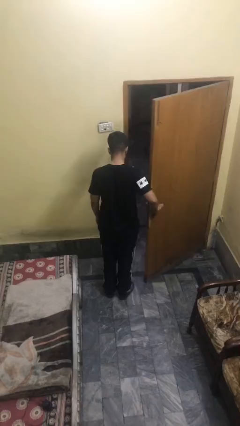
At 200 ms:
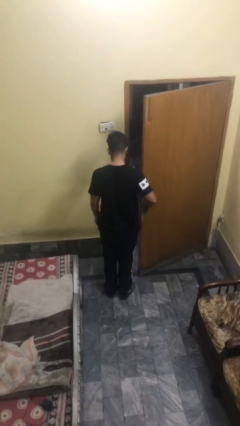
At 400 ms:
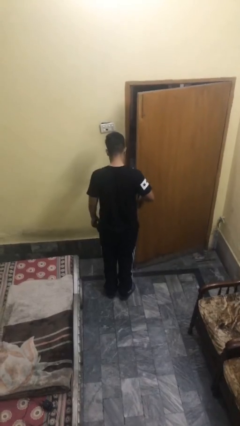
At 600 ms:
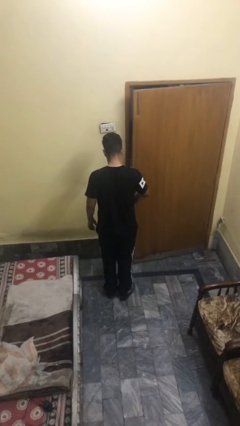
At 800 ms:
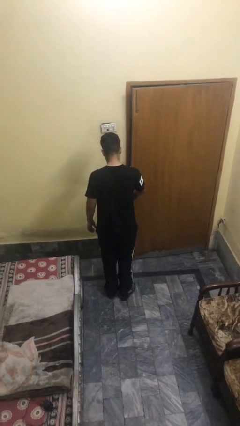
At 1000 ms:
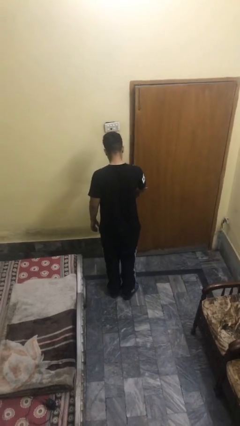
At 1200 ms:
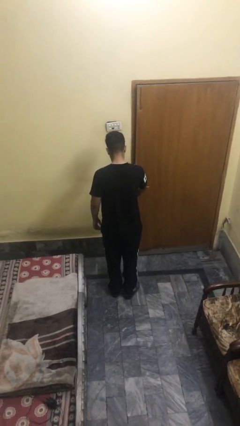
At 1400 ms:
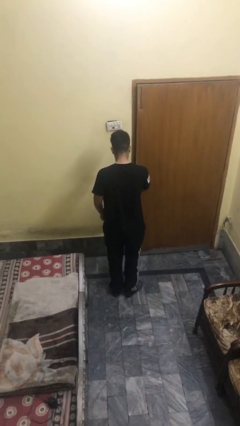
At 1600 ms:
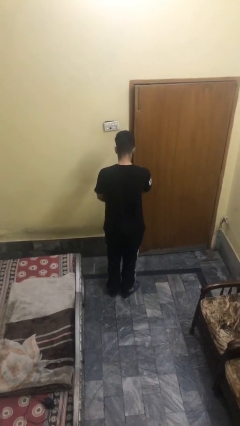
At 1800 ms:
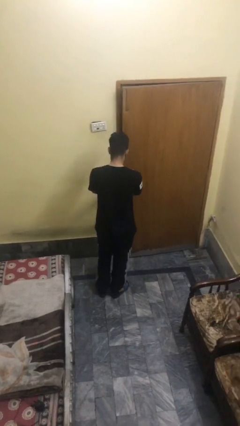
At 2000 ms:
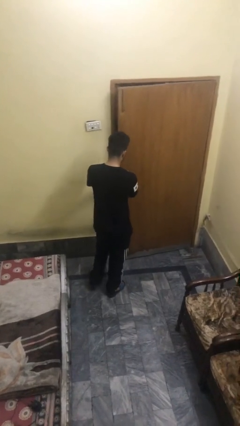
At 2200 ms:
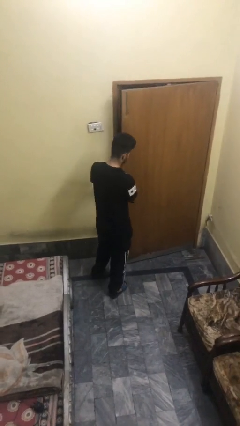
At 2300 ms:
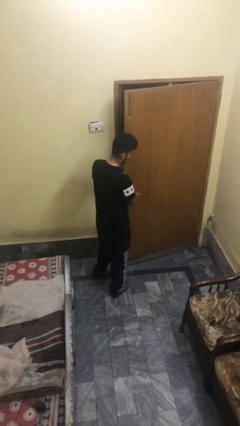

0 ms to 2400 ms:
person closes facility door

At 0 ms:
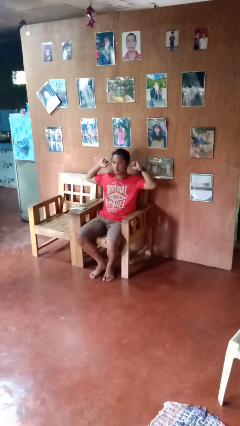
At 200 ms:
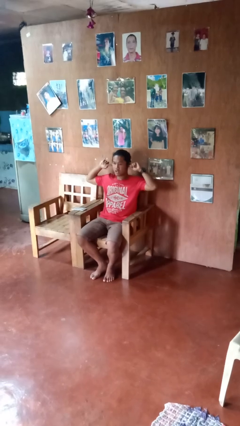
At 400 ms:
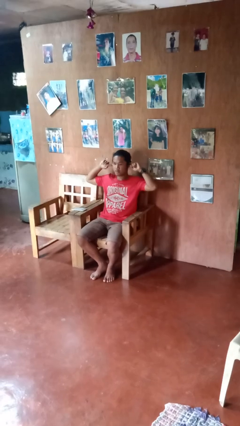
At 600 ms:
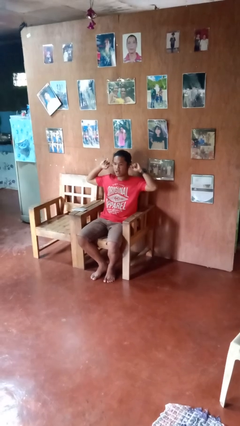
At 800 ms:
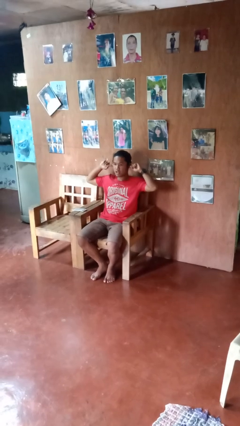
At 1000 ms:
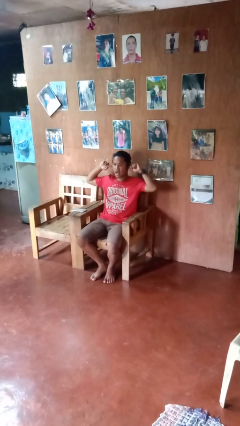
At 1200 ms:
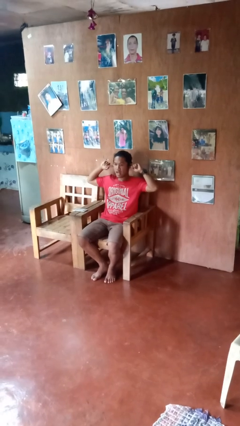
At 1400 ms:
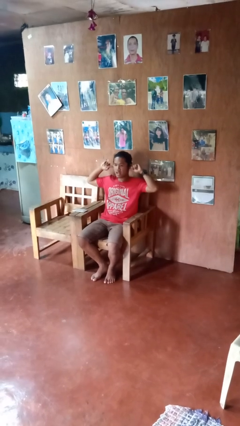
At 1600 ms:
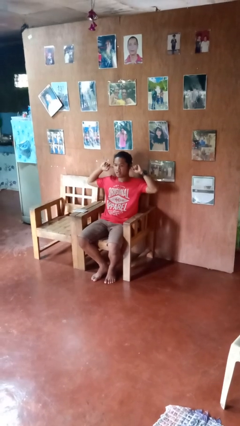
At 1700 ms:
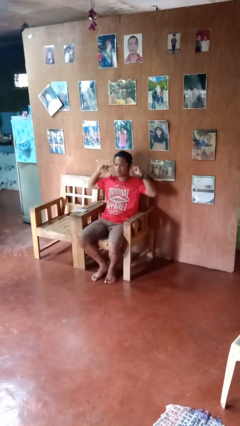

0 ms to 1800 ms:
person puts fingers in ear

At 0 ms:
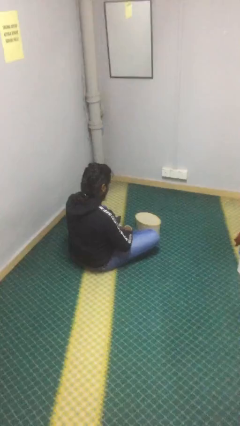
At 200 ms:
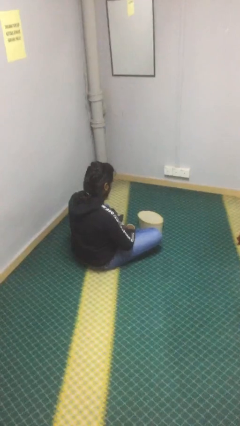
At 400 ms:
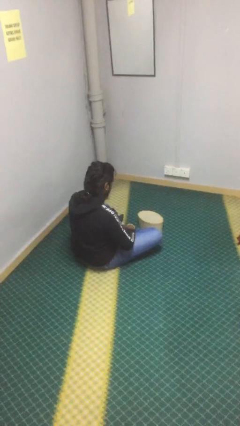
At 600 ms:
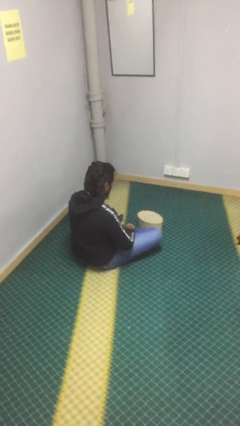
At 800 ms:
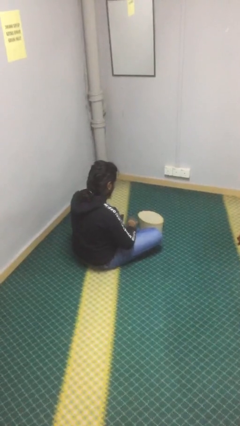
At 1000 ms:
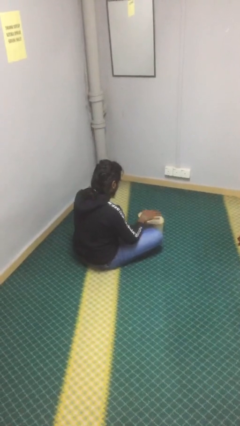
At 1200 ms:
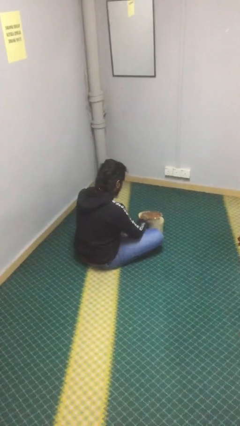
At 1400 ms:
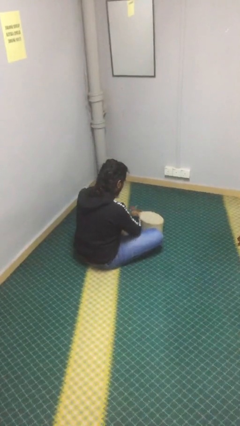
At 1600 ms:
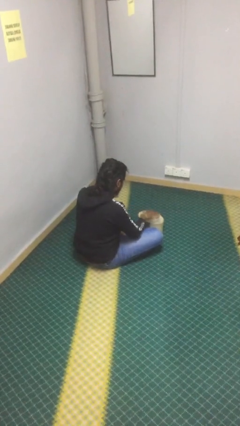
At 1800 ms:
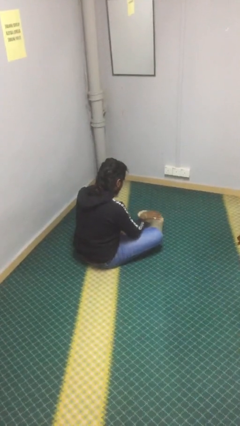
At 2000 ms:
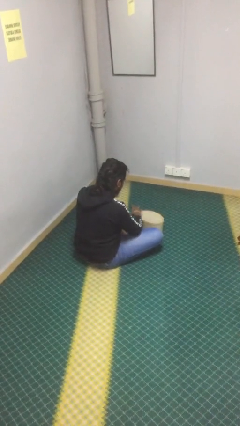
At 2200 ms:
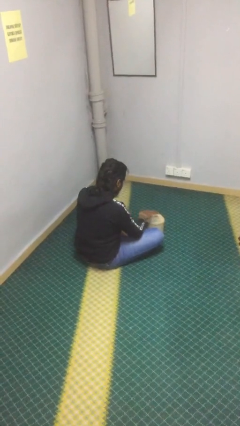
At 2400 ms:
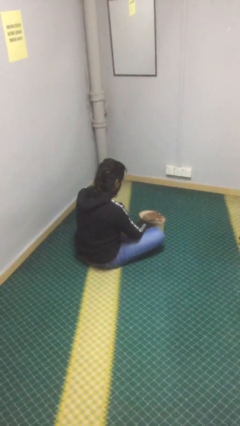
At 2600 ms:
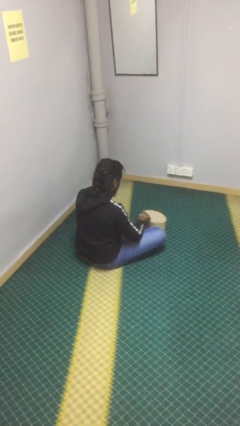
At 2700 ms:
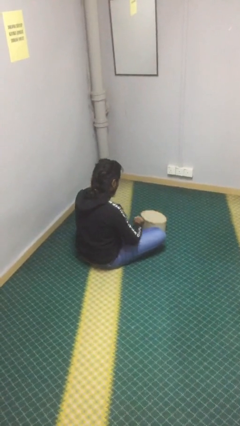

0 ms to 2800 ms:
person waves hand over object

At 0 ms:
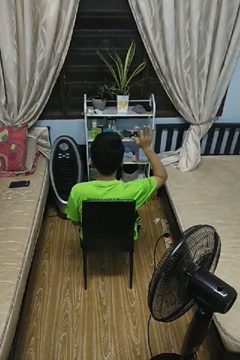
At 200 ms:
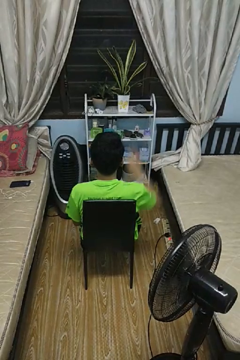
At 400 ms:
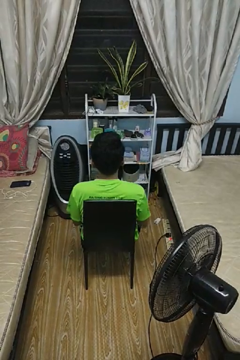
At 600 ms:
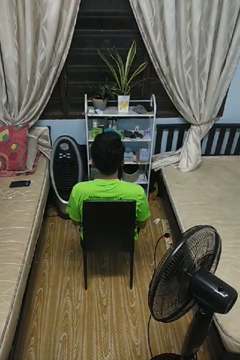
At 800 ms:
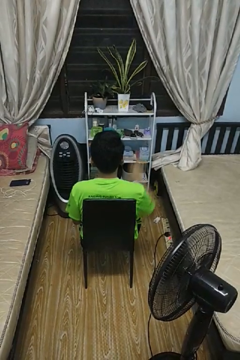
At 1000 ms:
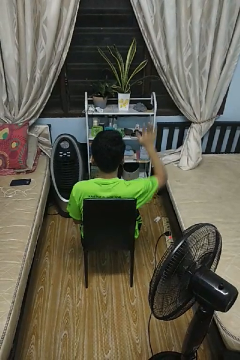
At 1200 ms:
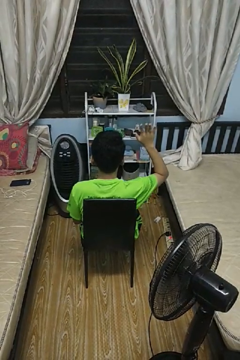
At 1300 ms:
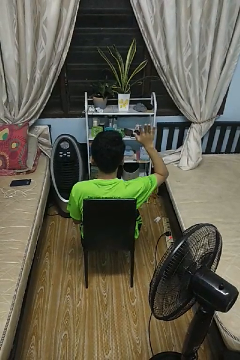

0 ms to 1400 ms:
person gestures number five

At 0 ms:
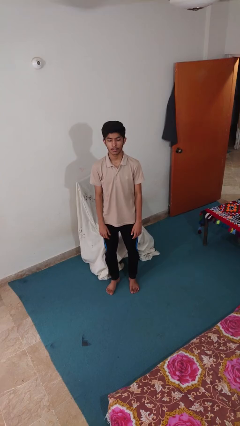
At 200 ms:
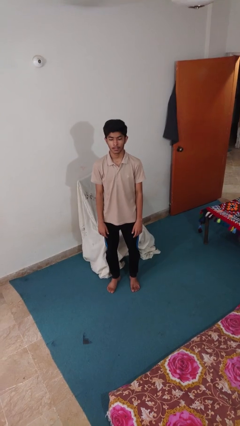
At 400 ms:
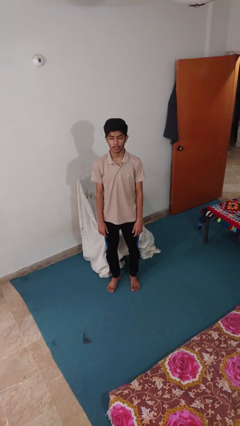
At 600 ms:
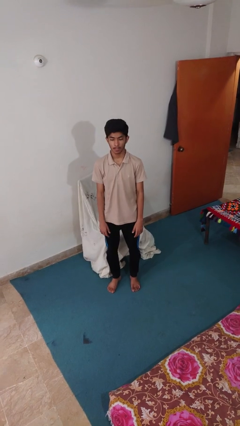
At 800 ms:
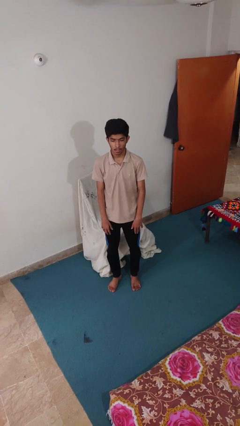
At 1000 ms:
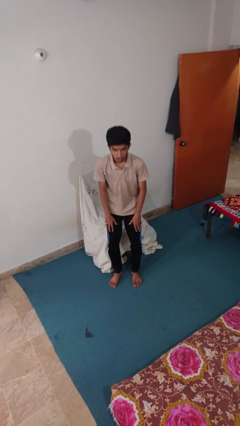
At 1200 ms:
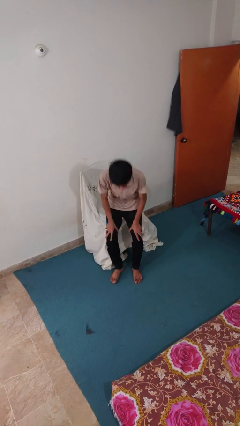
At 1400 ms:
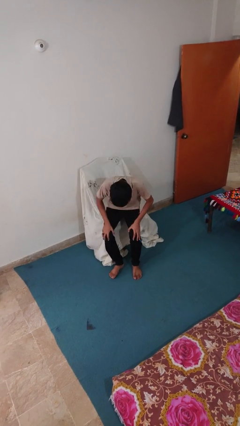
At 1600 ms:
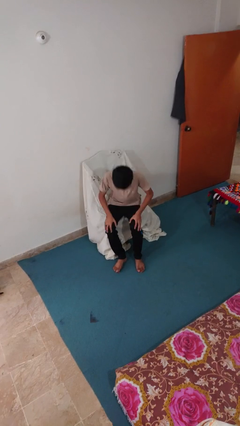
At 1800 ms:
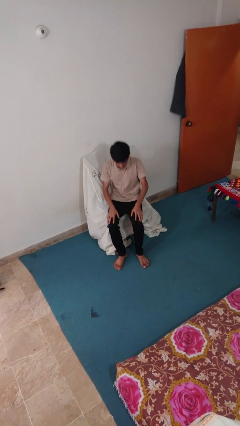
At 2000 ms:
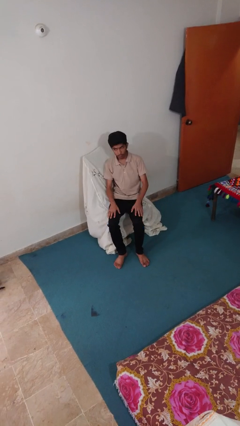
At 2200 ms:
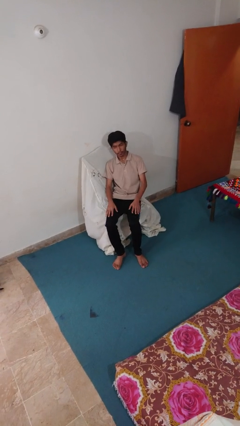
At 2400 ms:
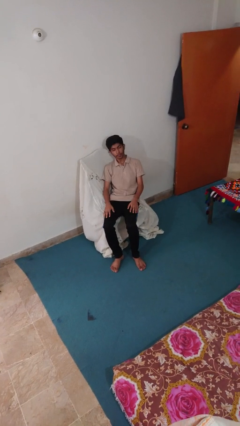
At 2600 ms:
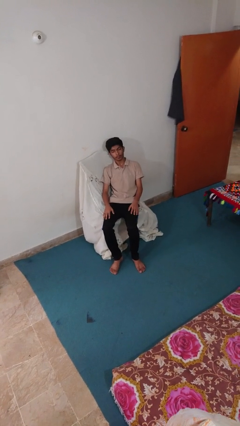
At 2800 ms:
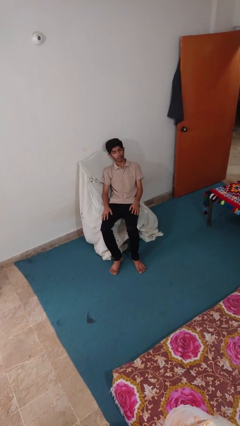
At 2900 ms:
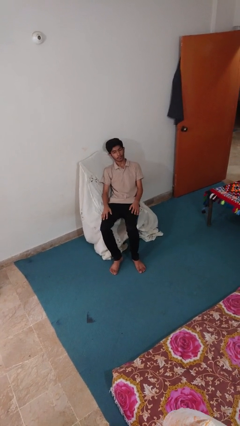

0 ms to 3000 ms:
person lies down on couch

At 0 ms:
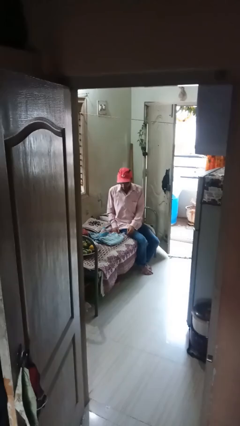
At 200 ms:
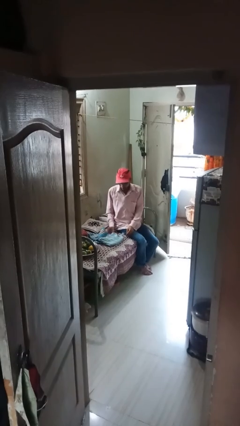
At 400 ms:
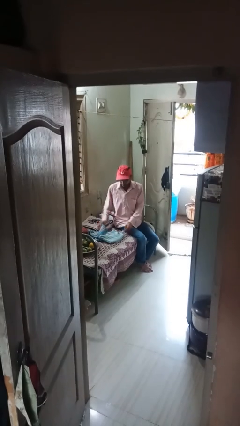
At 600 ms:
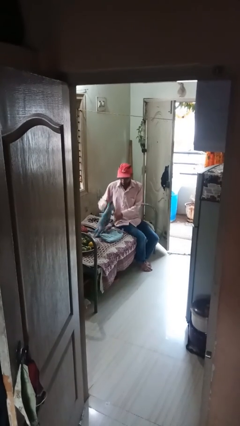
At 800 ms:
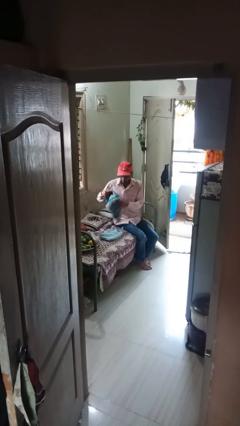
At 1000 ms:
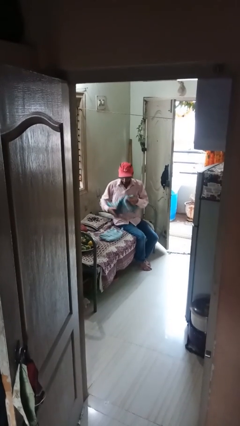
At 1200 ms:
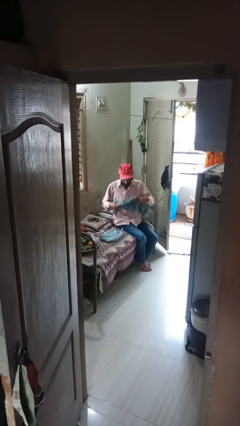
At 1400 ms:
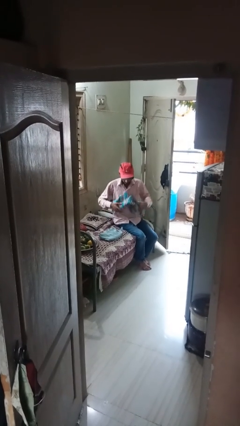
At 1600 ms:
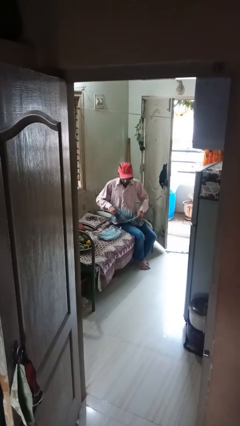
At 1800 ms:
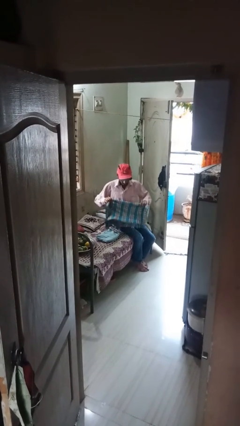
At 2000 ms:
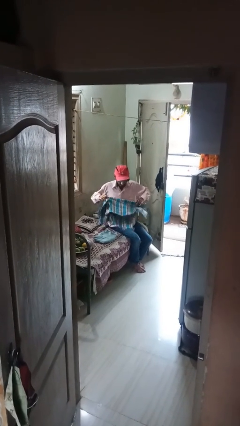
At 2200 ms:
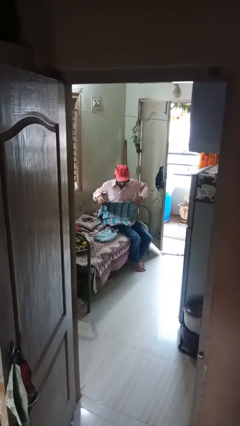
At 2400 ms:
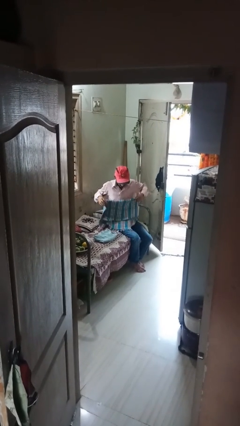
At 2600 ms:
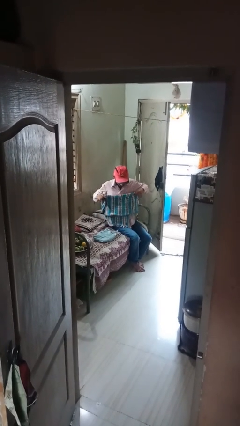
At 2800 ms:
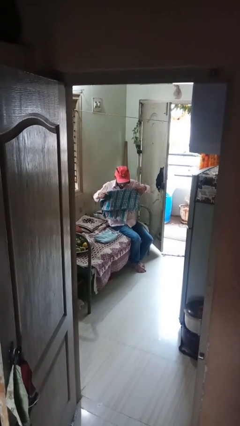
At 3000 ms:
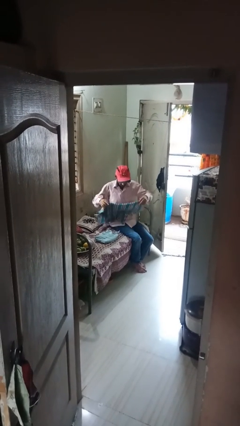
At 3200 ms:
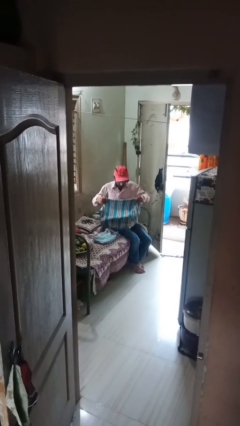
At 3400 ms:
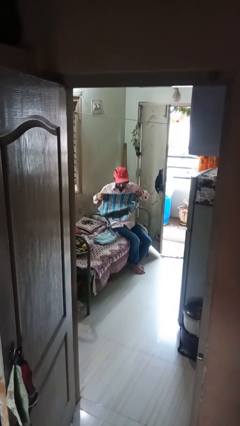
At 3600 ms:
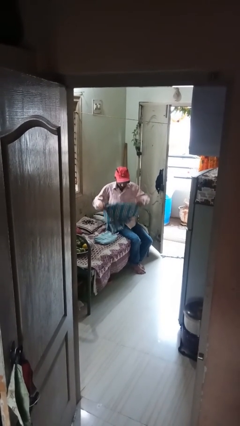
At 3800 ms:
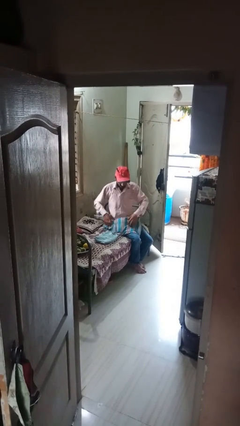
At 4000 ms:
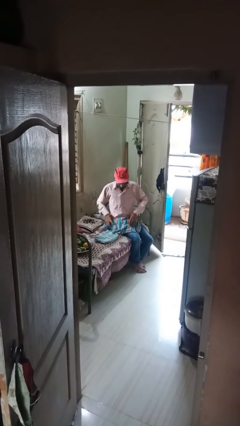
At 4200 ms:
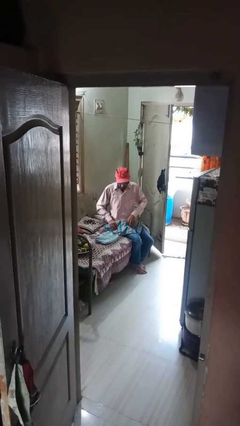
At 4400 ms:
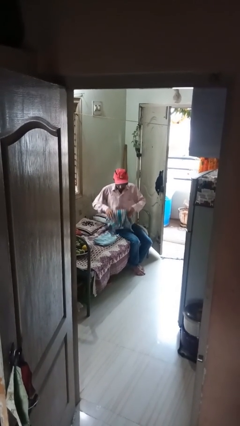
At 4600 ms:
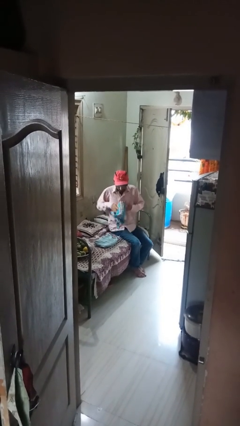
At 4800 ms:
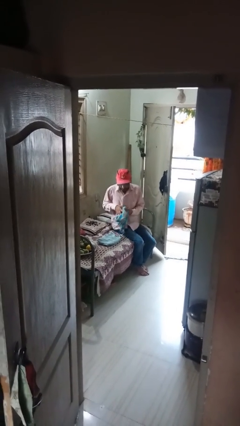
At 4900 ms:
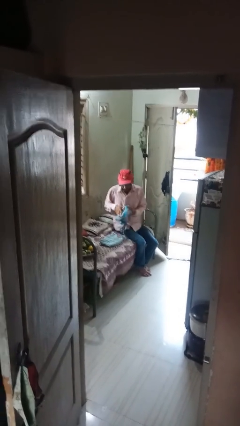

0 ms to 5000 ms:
person folds towel

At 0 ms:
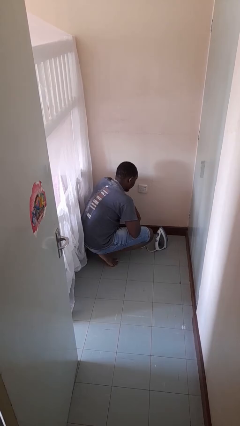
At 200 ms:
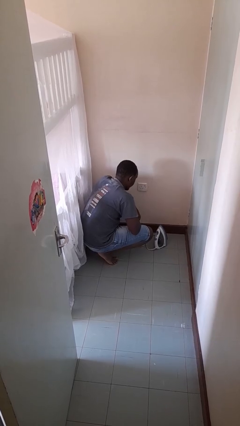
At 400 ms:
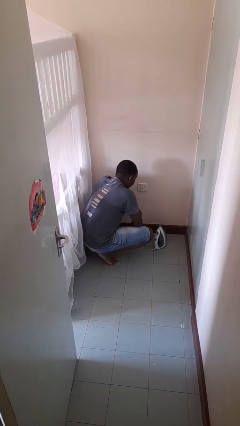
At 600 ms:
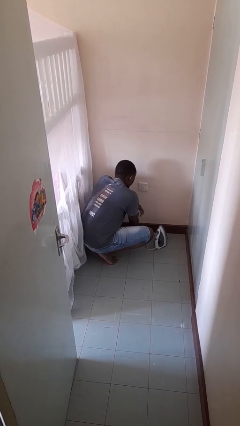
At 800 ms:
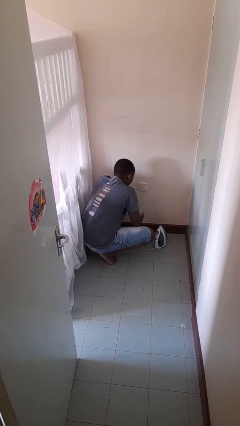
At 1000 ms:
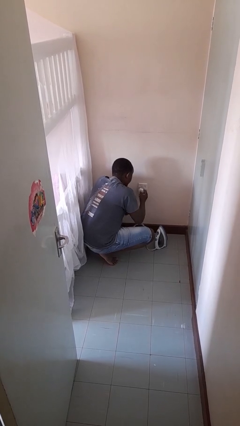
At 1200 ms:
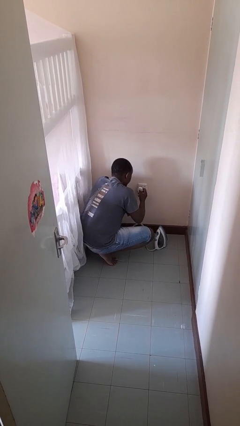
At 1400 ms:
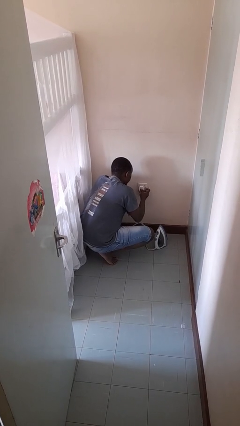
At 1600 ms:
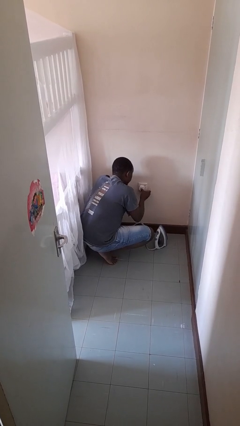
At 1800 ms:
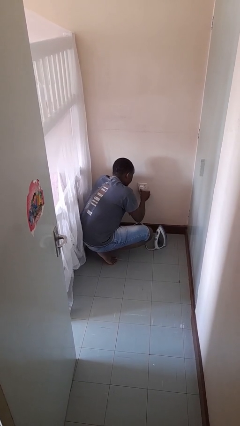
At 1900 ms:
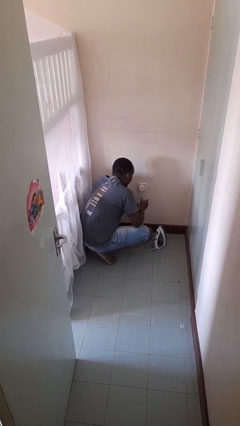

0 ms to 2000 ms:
person plugs into electrical socket
